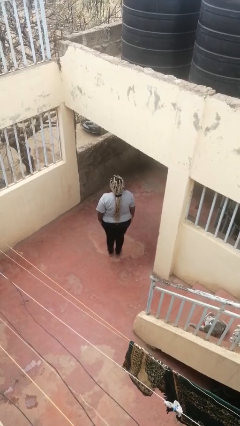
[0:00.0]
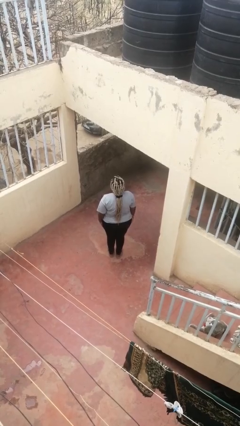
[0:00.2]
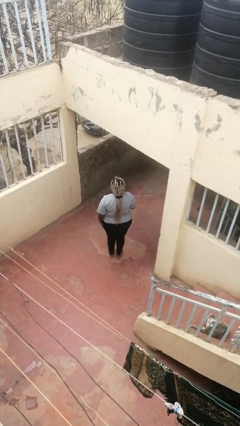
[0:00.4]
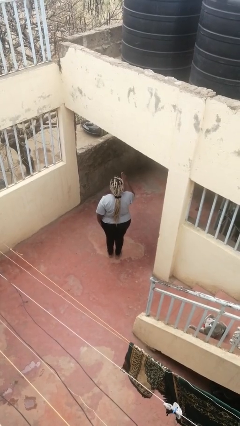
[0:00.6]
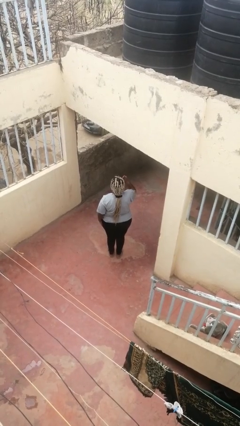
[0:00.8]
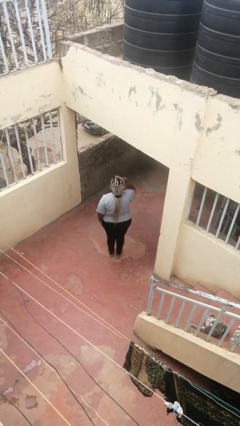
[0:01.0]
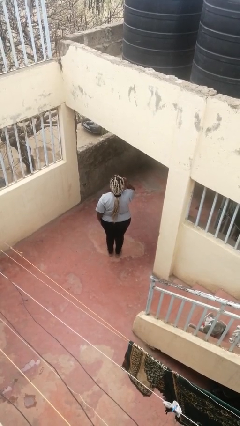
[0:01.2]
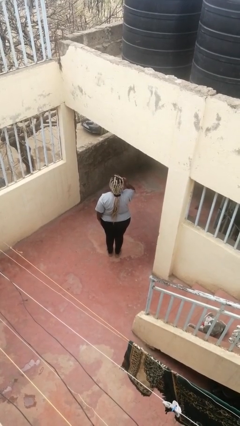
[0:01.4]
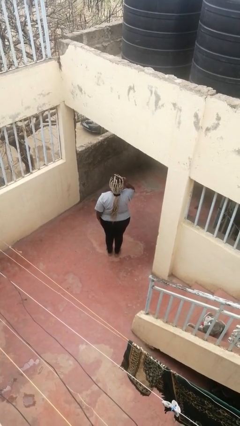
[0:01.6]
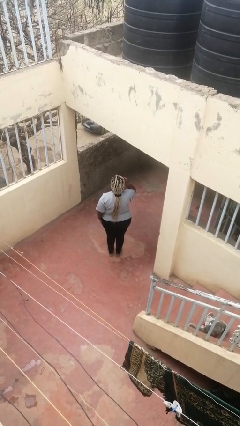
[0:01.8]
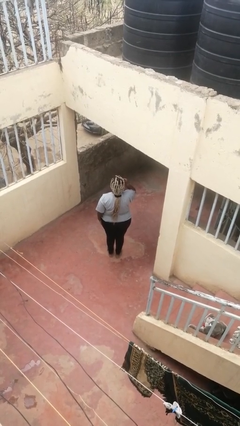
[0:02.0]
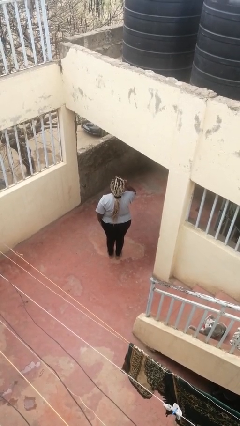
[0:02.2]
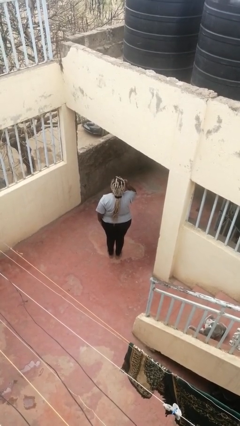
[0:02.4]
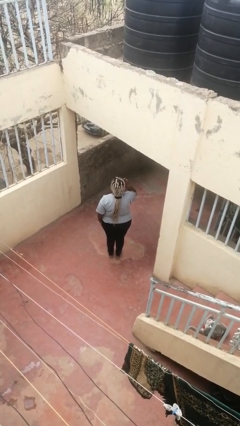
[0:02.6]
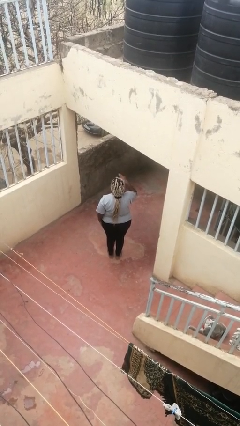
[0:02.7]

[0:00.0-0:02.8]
person salutes

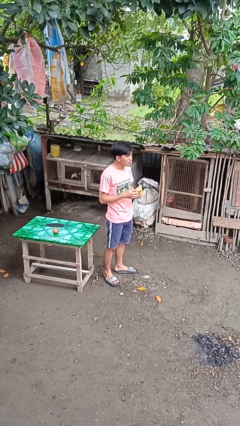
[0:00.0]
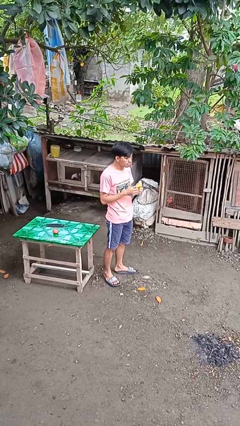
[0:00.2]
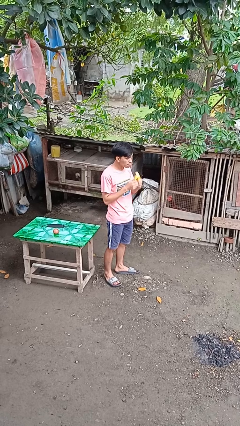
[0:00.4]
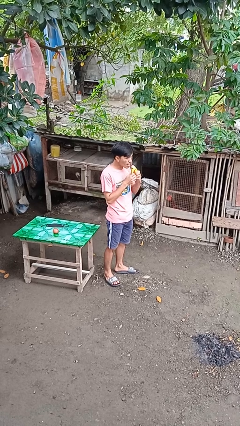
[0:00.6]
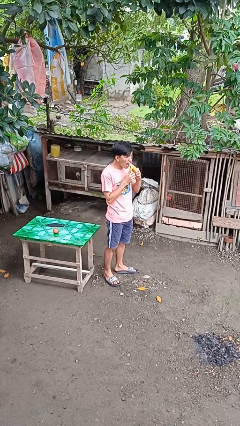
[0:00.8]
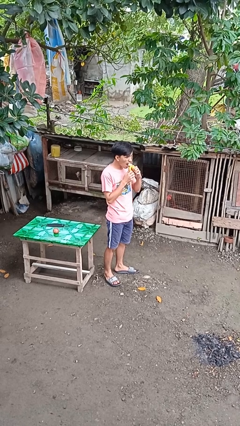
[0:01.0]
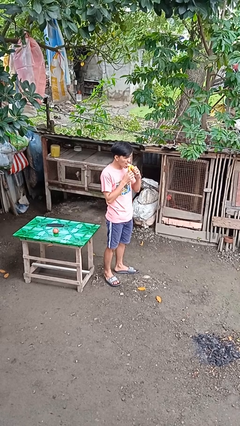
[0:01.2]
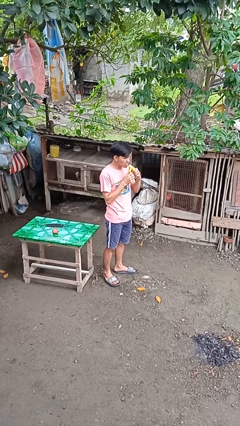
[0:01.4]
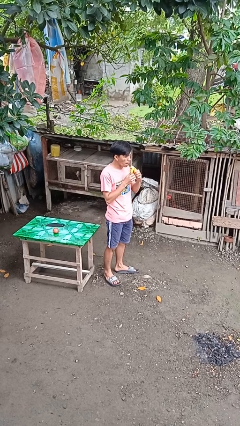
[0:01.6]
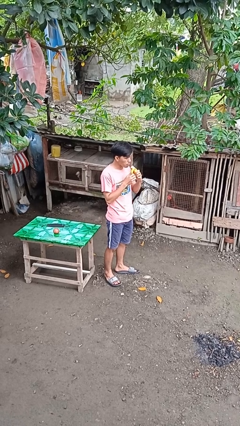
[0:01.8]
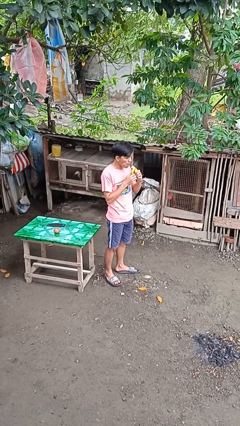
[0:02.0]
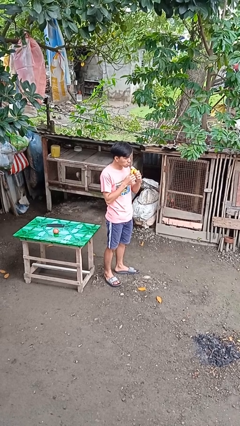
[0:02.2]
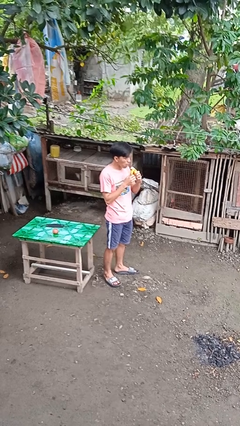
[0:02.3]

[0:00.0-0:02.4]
person eats banana

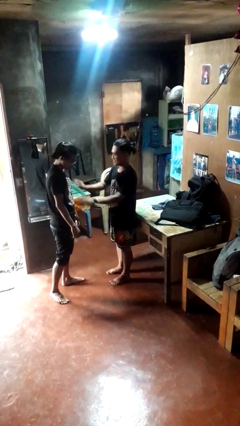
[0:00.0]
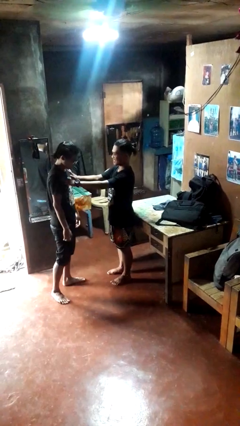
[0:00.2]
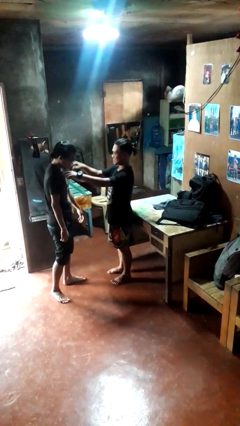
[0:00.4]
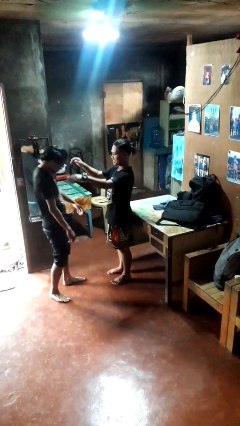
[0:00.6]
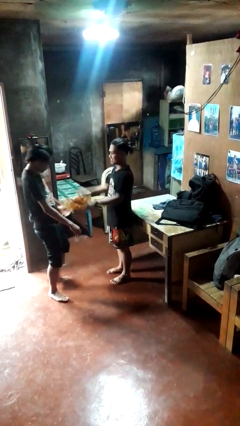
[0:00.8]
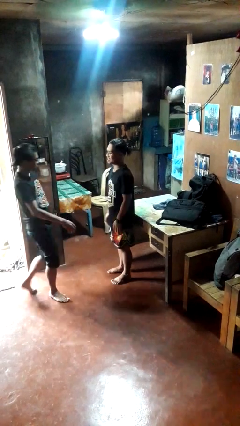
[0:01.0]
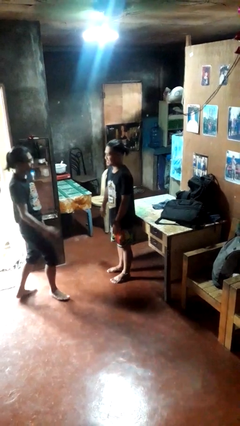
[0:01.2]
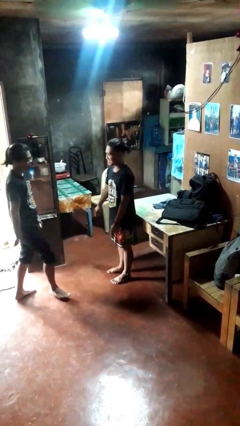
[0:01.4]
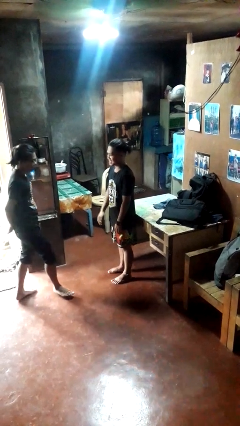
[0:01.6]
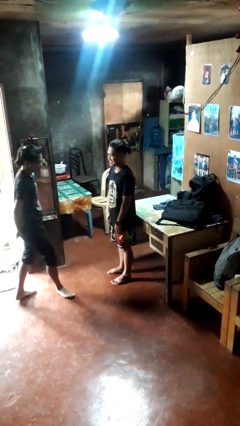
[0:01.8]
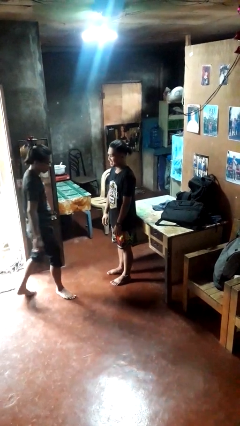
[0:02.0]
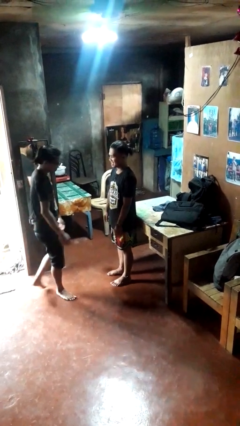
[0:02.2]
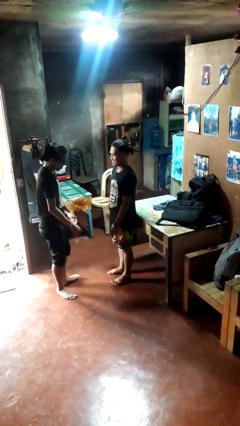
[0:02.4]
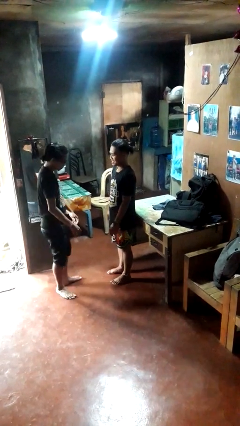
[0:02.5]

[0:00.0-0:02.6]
person shoves person

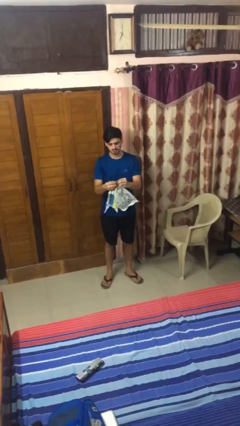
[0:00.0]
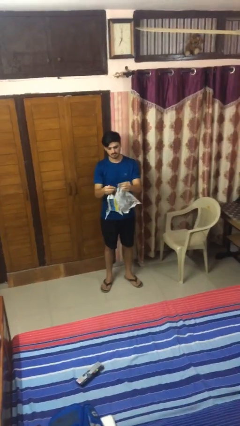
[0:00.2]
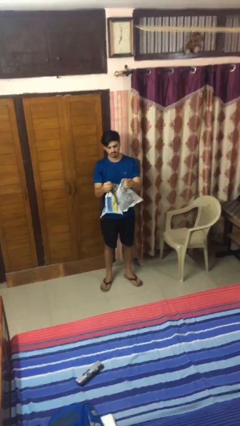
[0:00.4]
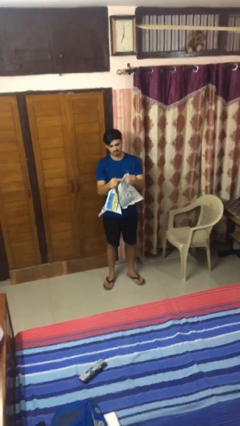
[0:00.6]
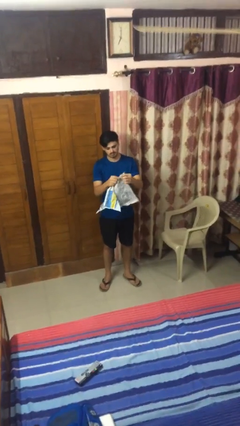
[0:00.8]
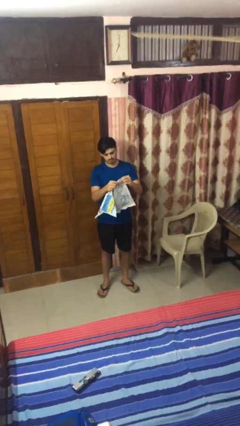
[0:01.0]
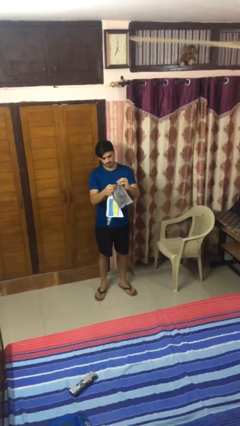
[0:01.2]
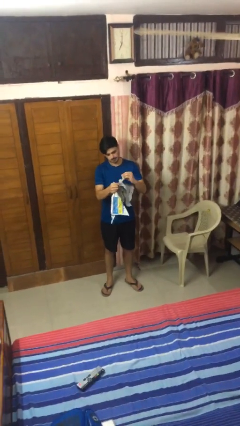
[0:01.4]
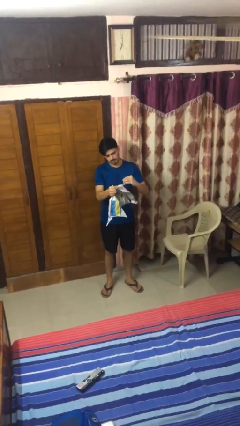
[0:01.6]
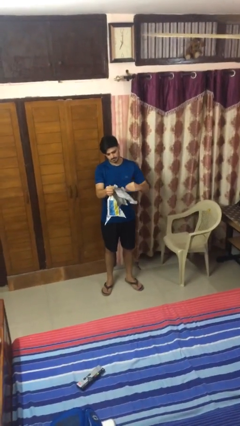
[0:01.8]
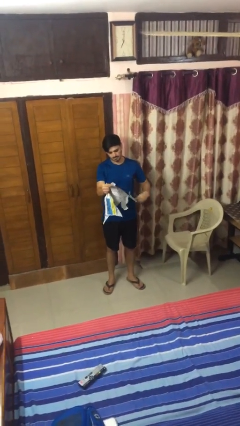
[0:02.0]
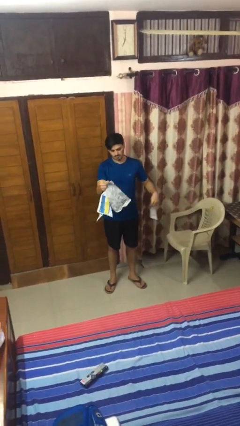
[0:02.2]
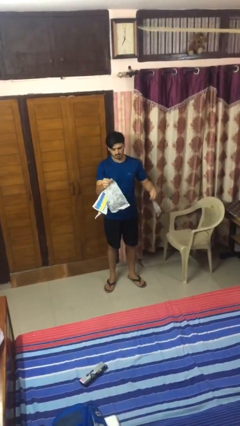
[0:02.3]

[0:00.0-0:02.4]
person tears paper

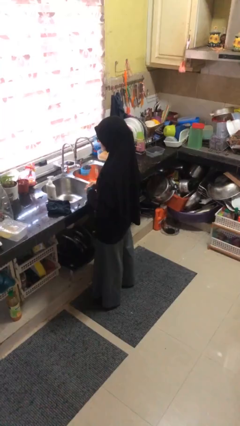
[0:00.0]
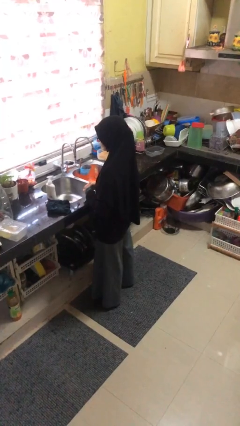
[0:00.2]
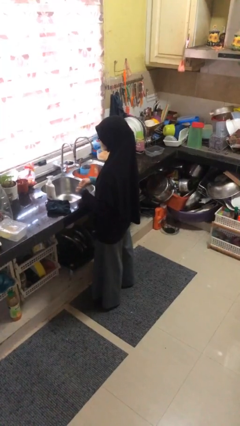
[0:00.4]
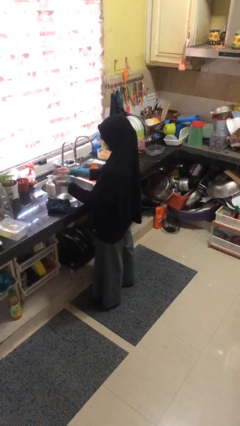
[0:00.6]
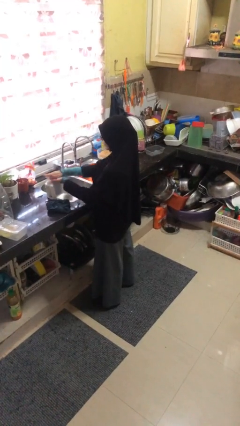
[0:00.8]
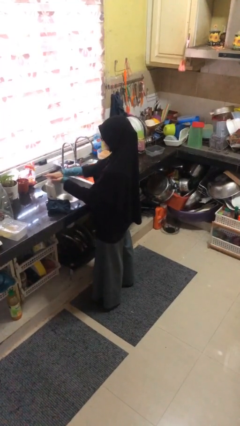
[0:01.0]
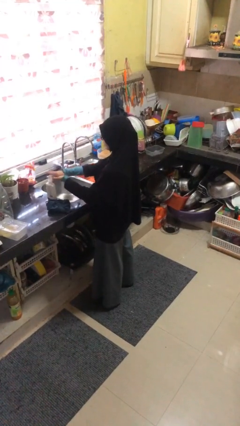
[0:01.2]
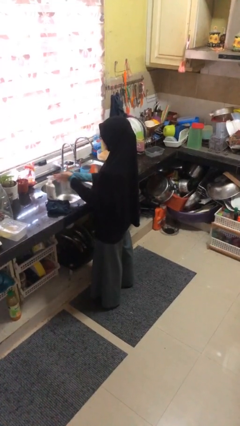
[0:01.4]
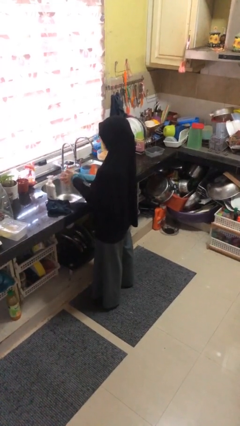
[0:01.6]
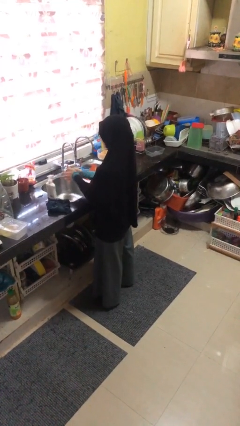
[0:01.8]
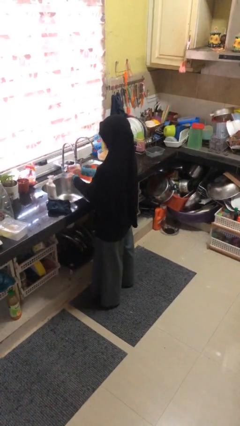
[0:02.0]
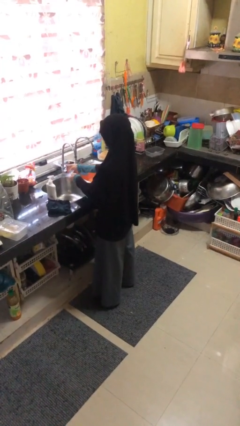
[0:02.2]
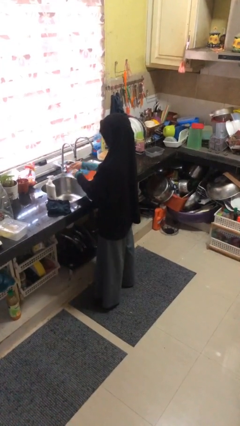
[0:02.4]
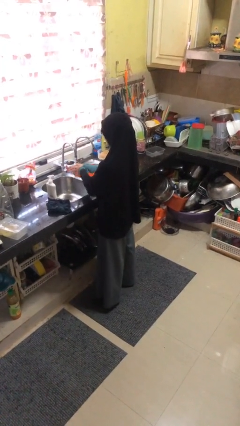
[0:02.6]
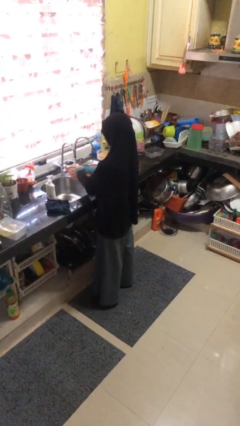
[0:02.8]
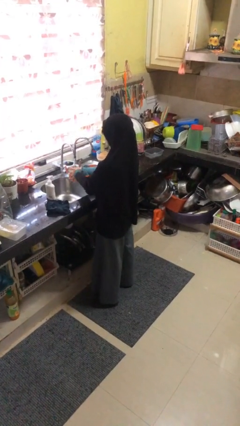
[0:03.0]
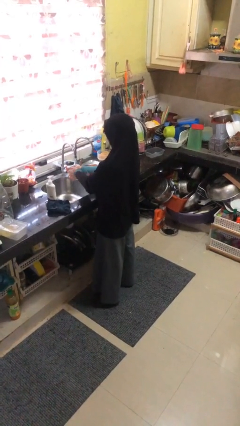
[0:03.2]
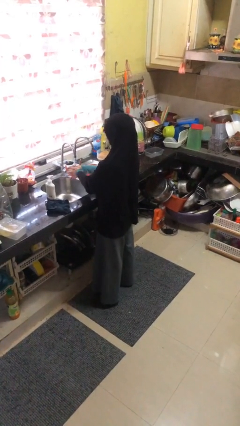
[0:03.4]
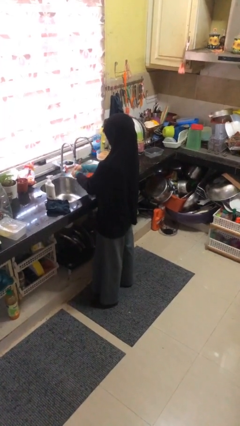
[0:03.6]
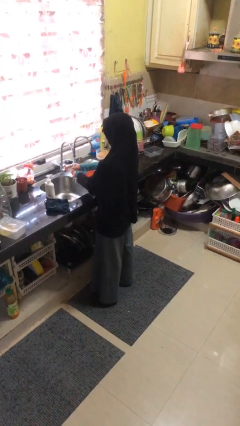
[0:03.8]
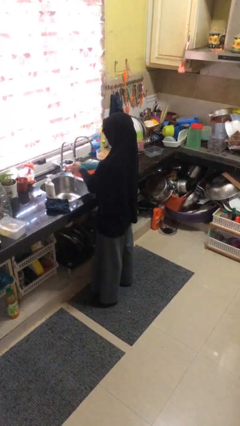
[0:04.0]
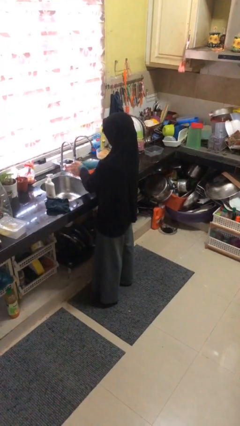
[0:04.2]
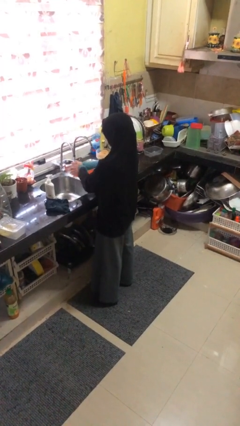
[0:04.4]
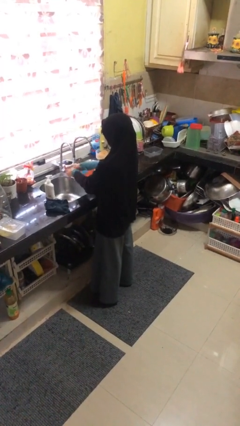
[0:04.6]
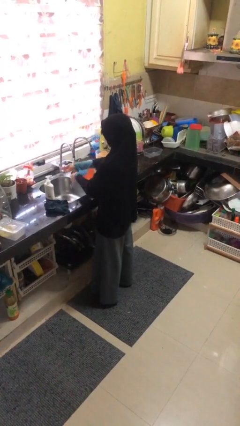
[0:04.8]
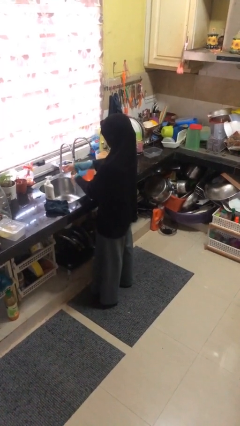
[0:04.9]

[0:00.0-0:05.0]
person washes hands

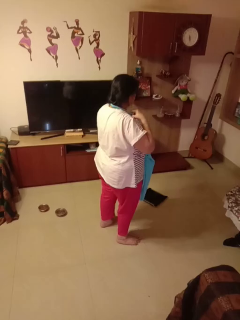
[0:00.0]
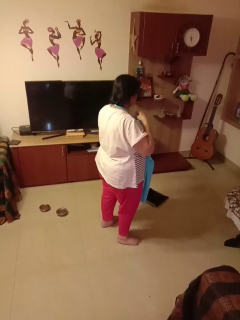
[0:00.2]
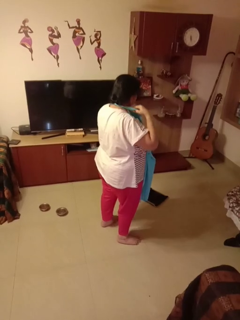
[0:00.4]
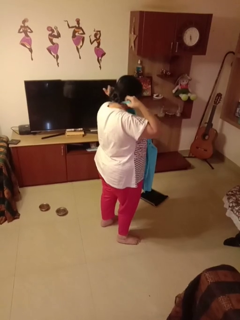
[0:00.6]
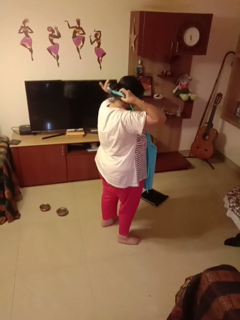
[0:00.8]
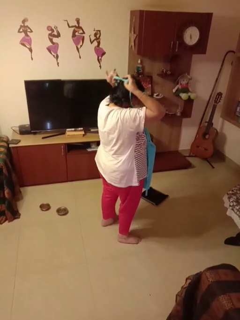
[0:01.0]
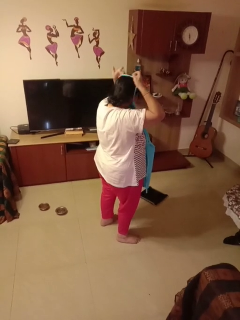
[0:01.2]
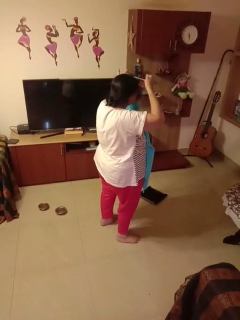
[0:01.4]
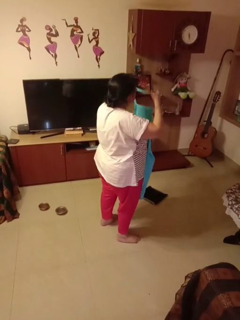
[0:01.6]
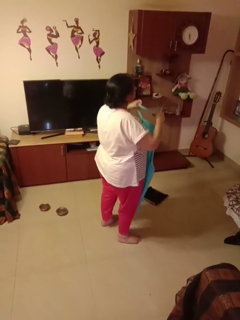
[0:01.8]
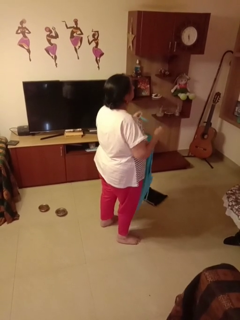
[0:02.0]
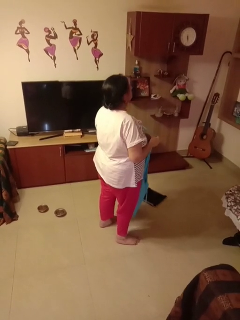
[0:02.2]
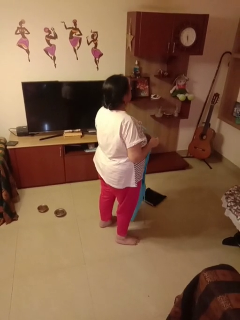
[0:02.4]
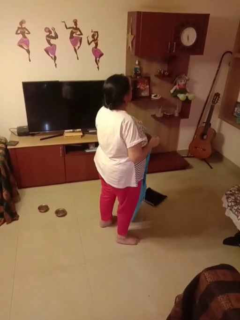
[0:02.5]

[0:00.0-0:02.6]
person takes off apron

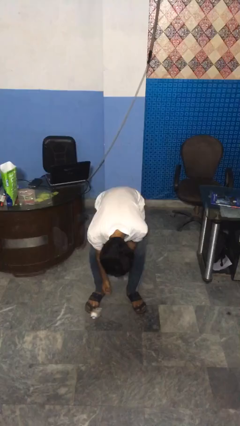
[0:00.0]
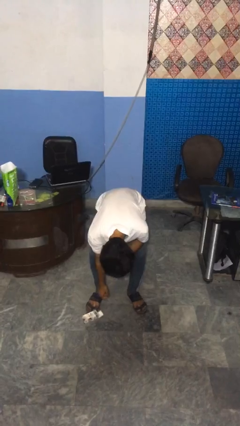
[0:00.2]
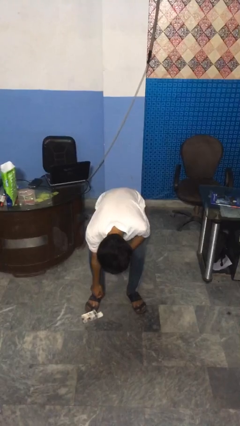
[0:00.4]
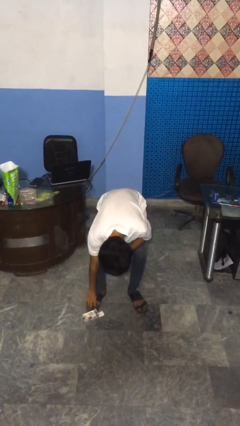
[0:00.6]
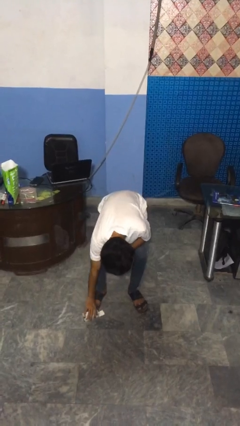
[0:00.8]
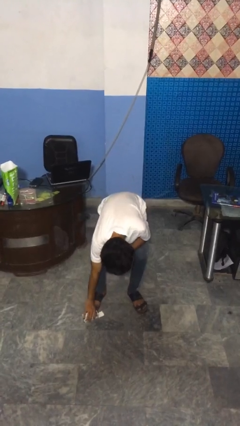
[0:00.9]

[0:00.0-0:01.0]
person catches dropped object
